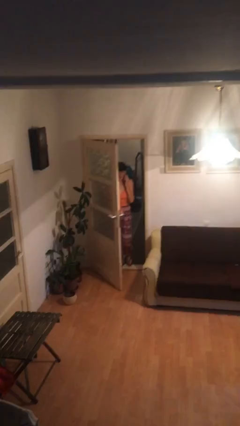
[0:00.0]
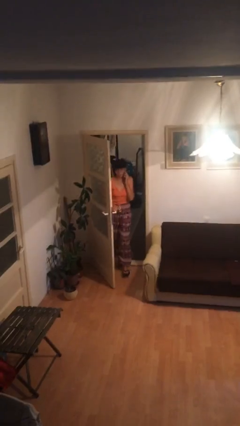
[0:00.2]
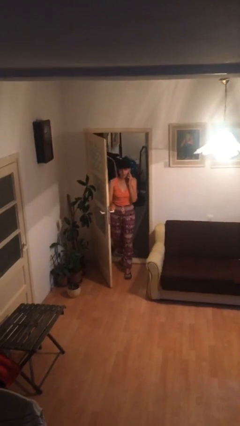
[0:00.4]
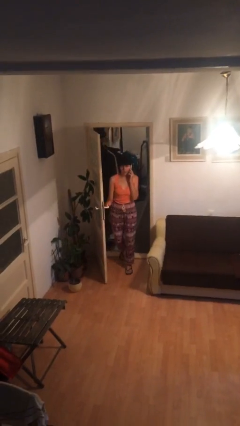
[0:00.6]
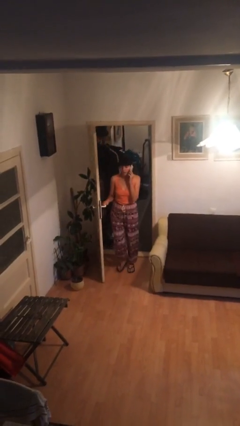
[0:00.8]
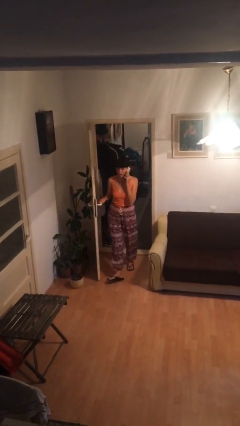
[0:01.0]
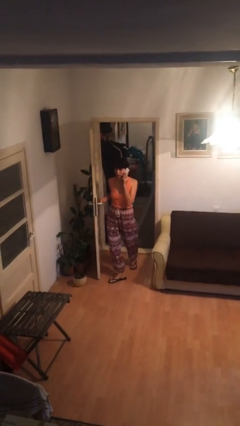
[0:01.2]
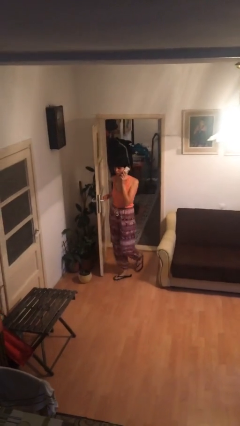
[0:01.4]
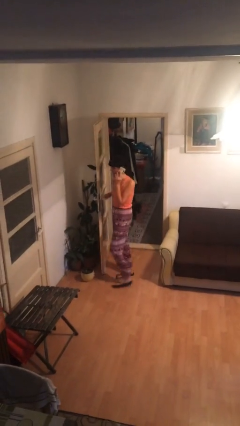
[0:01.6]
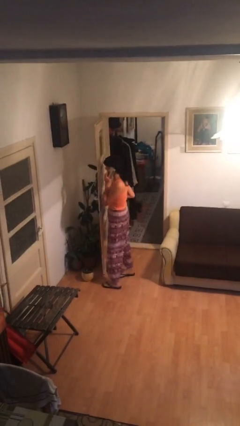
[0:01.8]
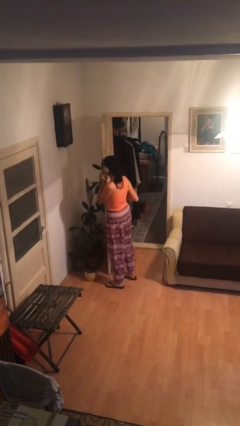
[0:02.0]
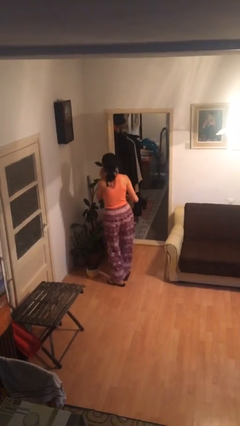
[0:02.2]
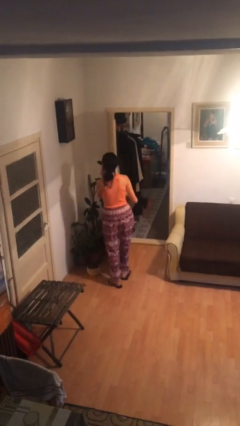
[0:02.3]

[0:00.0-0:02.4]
person enters scene through structure

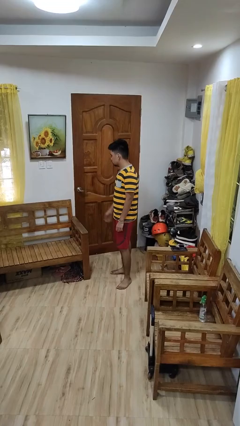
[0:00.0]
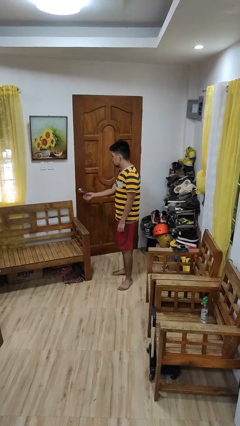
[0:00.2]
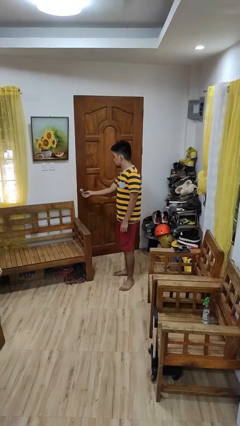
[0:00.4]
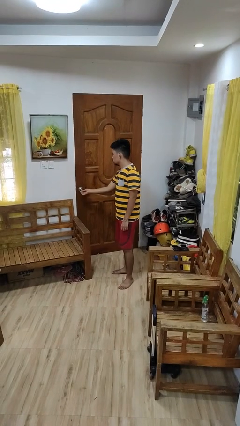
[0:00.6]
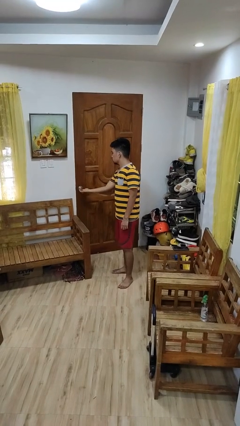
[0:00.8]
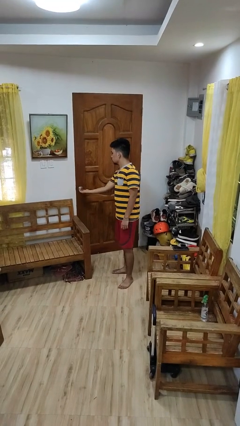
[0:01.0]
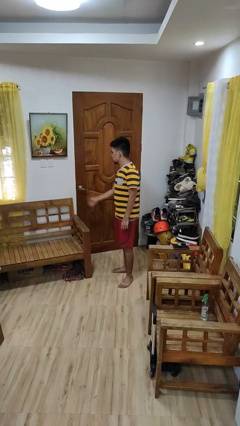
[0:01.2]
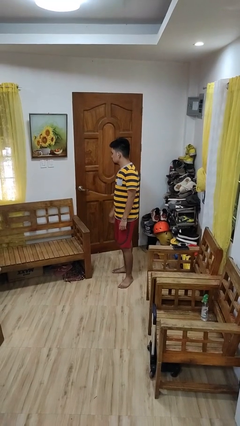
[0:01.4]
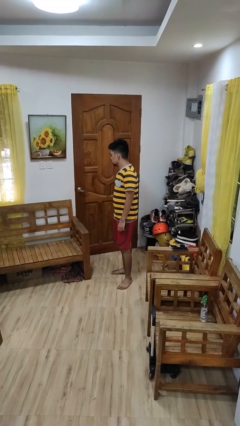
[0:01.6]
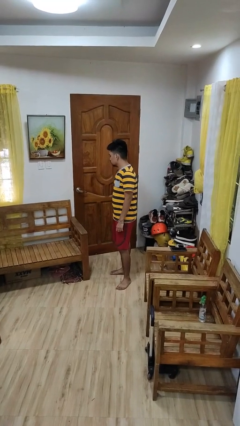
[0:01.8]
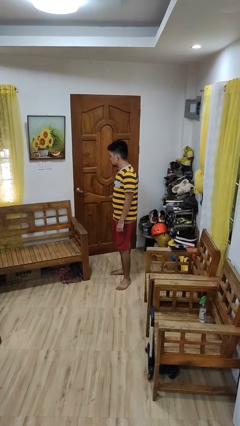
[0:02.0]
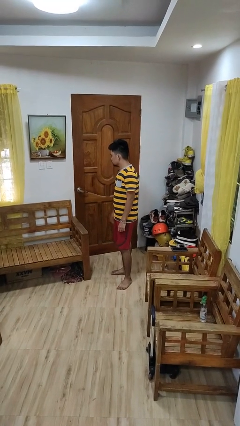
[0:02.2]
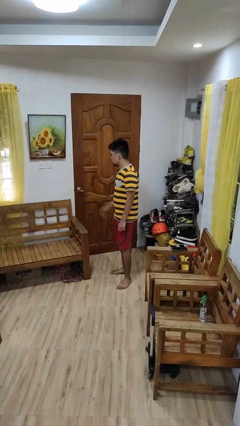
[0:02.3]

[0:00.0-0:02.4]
person unlocks door with keys

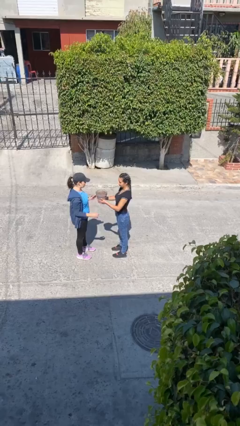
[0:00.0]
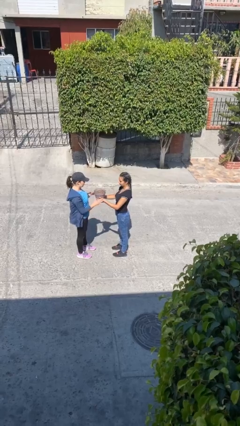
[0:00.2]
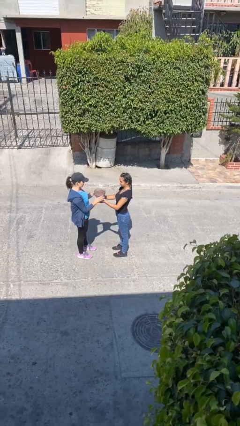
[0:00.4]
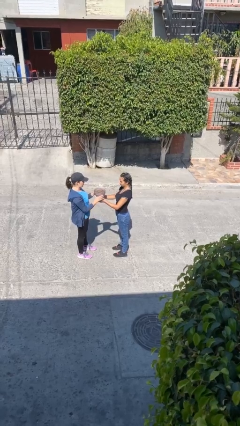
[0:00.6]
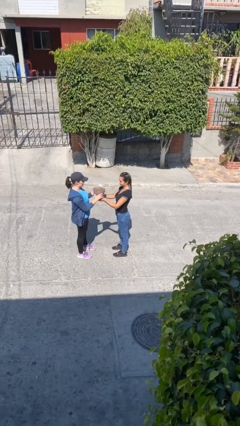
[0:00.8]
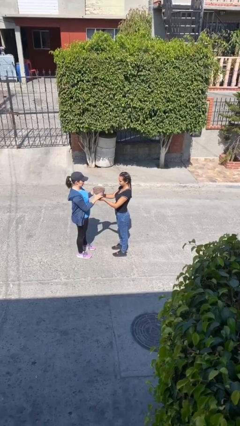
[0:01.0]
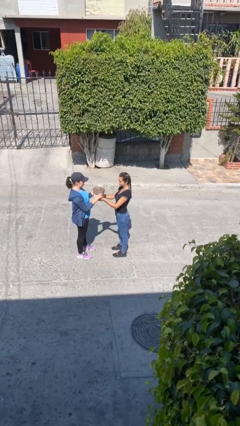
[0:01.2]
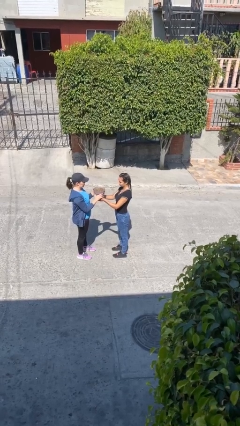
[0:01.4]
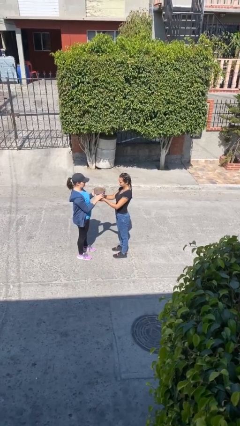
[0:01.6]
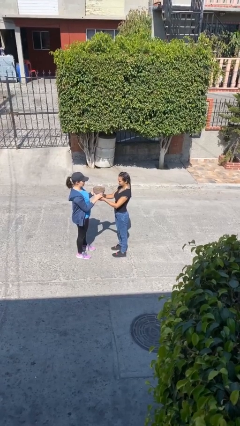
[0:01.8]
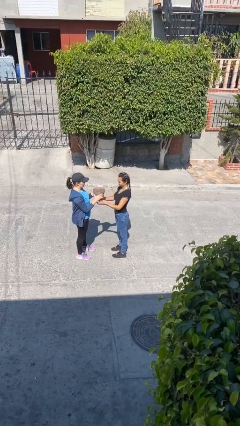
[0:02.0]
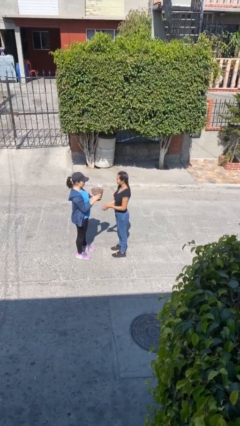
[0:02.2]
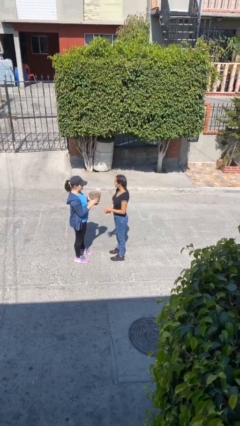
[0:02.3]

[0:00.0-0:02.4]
person transfers object to person

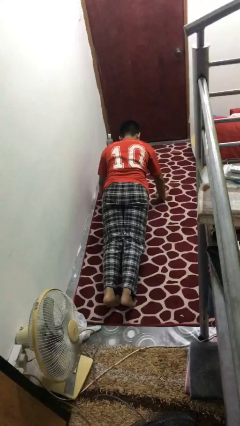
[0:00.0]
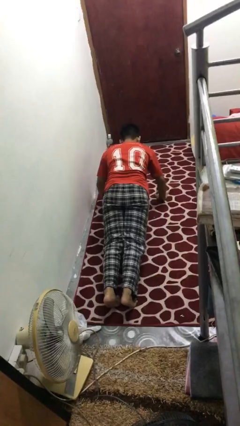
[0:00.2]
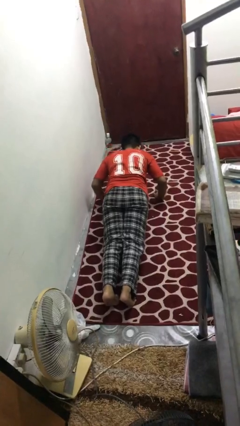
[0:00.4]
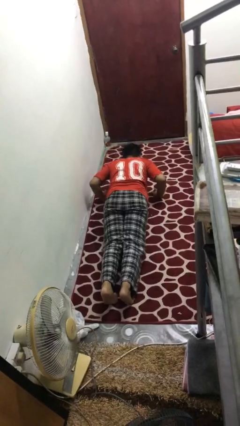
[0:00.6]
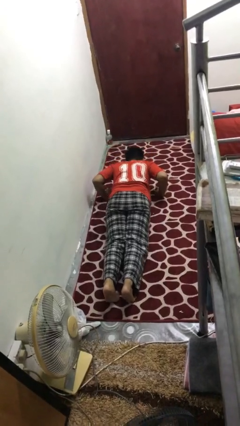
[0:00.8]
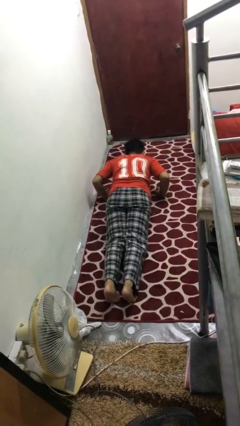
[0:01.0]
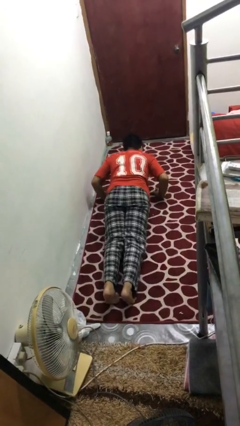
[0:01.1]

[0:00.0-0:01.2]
person exercises with pushup

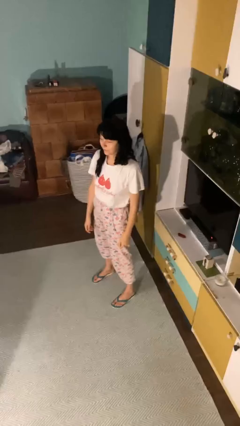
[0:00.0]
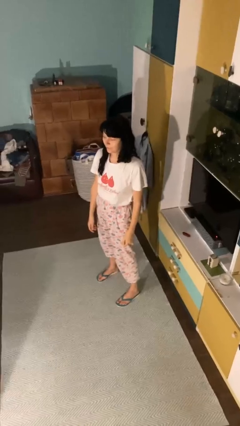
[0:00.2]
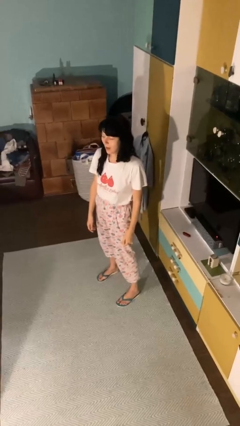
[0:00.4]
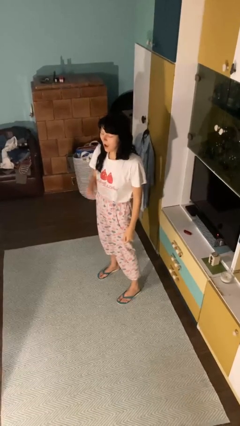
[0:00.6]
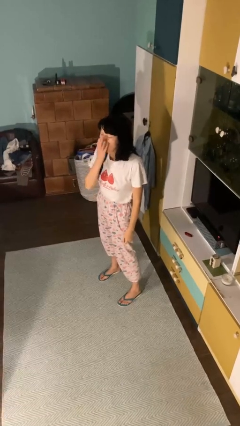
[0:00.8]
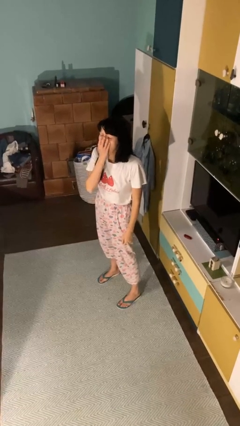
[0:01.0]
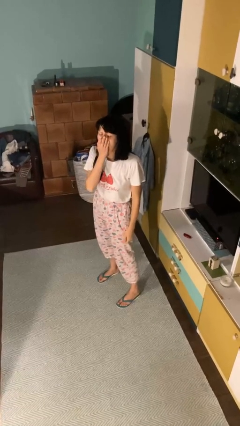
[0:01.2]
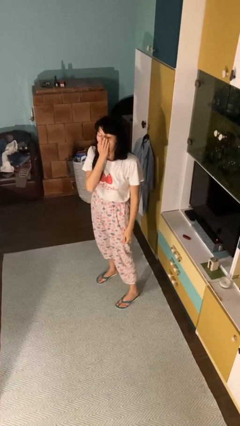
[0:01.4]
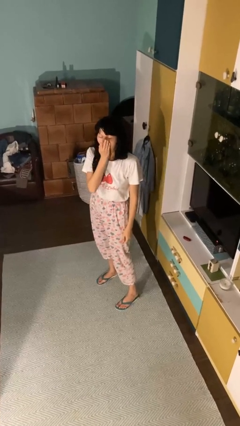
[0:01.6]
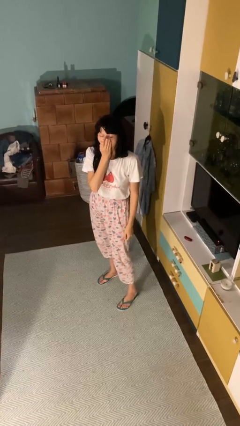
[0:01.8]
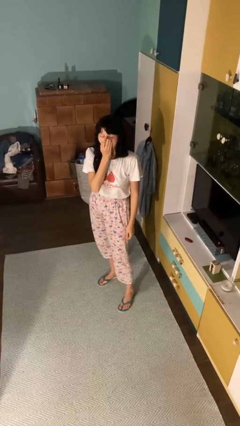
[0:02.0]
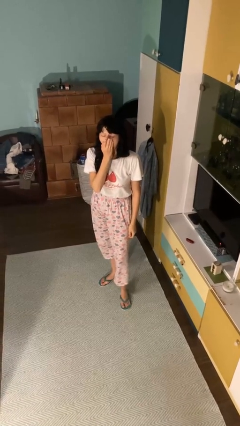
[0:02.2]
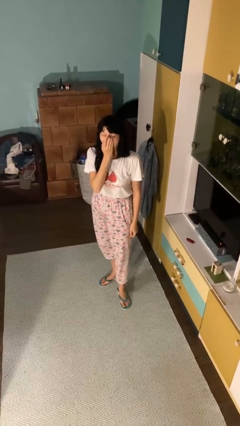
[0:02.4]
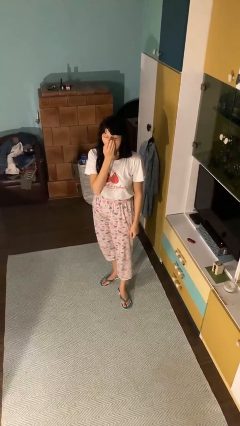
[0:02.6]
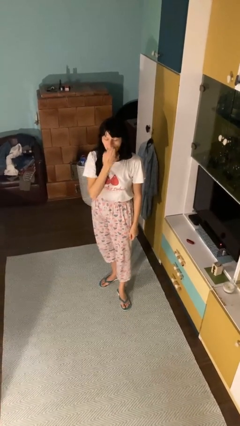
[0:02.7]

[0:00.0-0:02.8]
person yawns

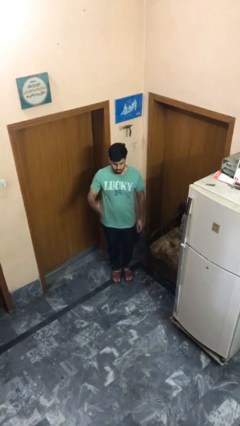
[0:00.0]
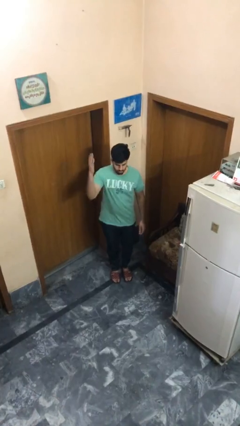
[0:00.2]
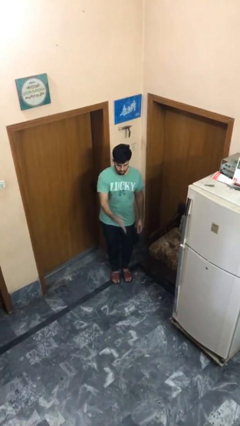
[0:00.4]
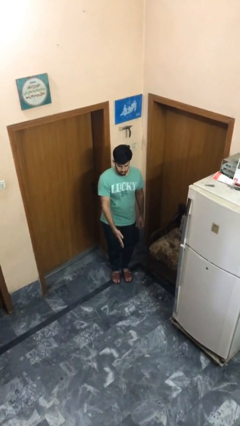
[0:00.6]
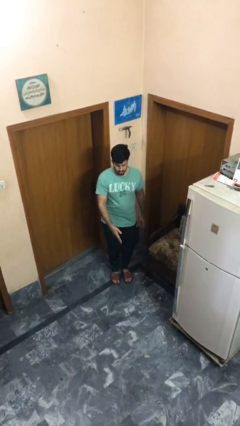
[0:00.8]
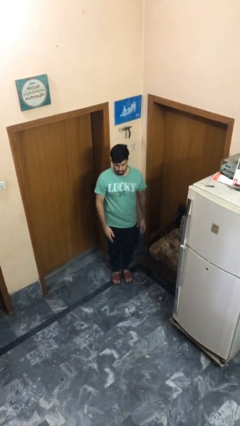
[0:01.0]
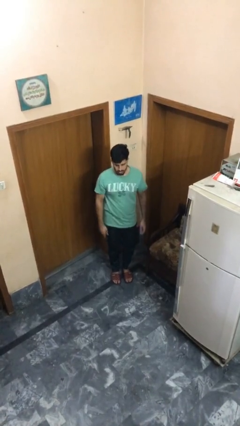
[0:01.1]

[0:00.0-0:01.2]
person karate chop

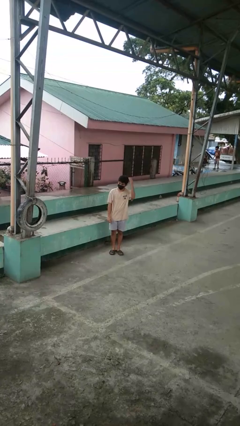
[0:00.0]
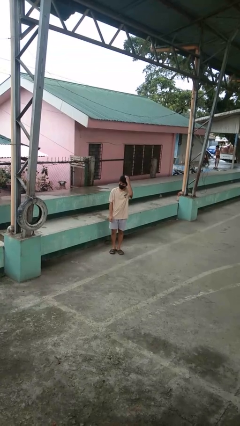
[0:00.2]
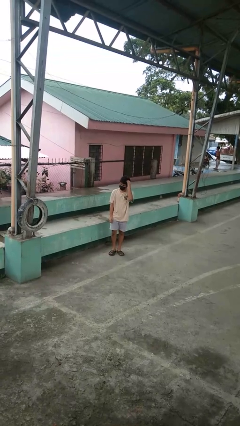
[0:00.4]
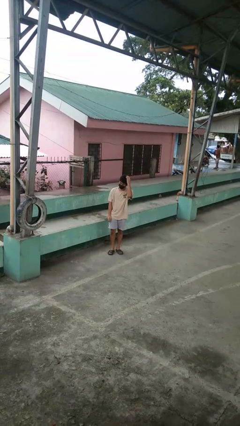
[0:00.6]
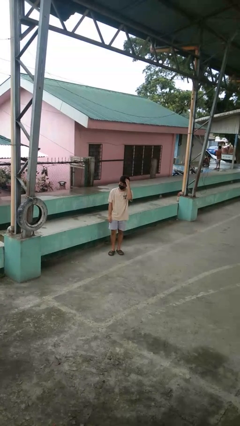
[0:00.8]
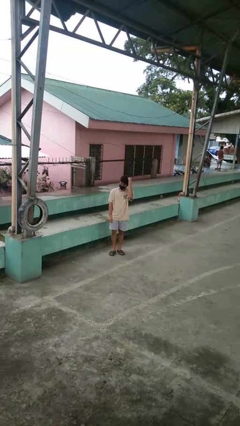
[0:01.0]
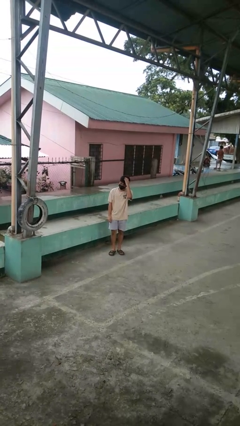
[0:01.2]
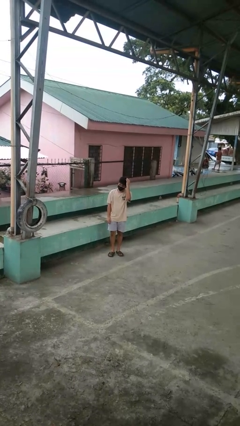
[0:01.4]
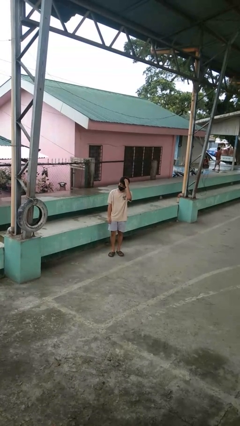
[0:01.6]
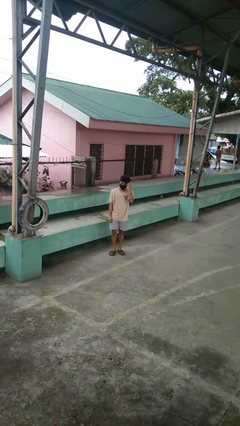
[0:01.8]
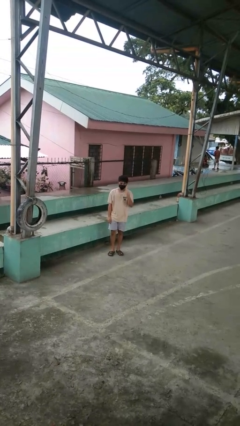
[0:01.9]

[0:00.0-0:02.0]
person pats head

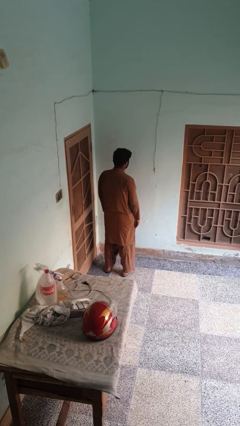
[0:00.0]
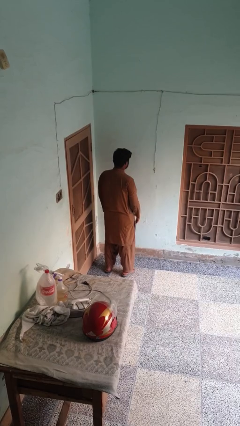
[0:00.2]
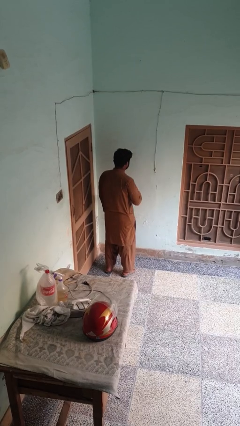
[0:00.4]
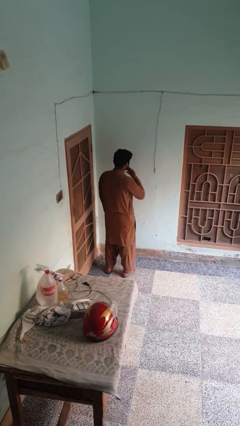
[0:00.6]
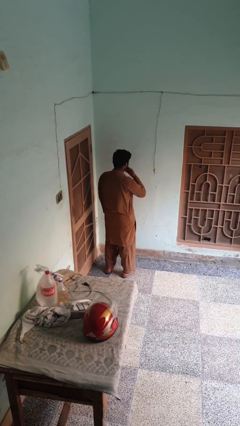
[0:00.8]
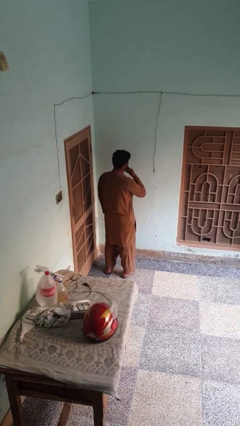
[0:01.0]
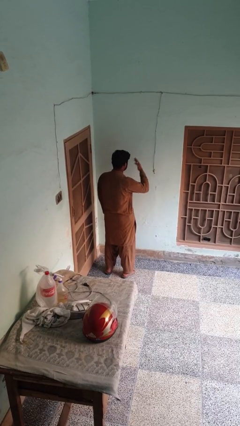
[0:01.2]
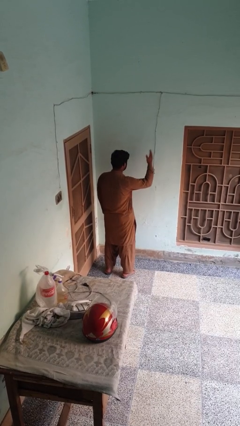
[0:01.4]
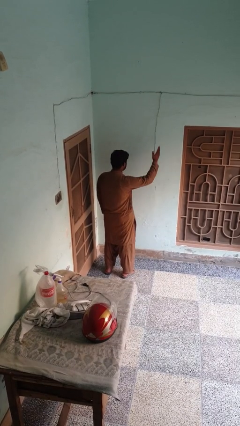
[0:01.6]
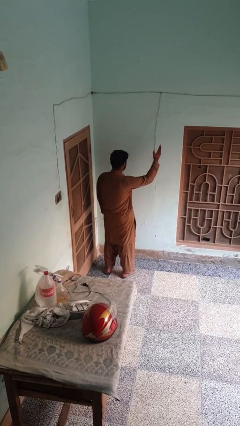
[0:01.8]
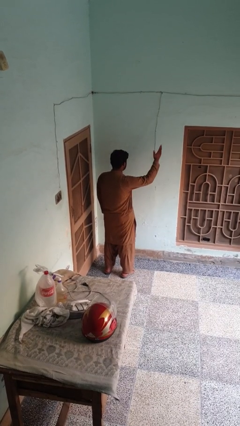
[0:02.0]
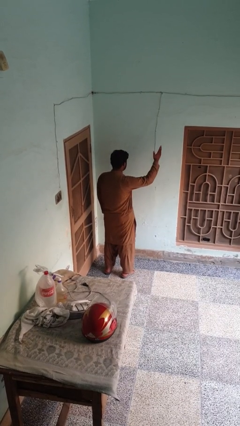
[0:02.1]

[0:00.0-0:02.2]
person gestures blow kiss
